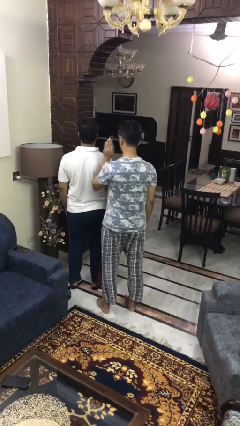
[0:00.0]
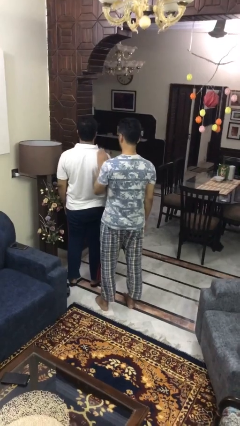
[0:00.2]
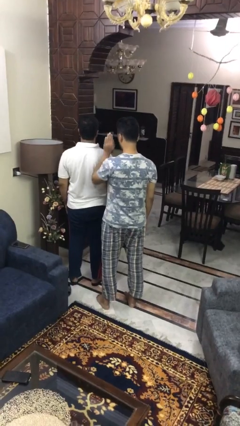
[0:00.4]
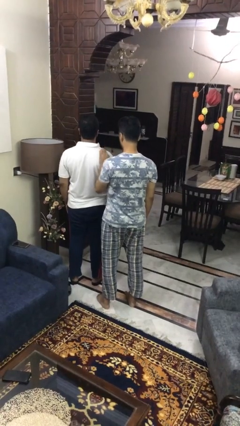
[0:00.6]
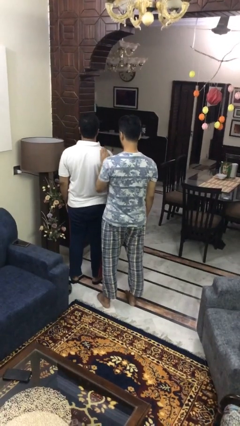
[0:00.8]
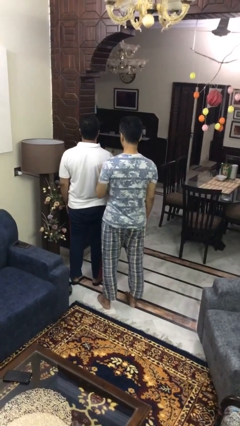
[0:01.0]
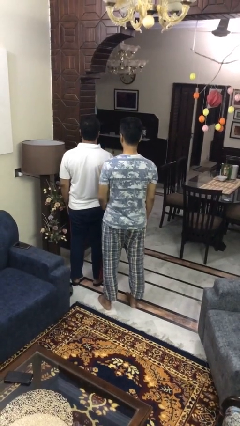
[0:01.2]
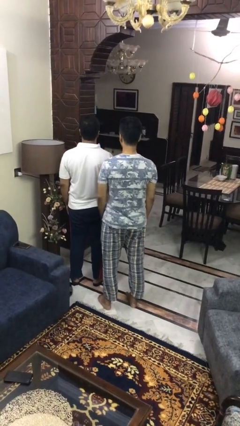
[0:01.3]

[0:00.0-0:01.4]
person pounds shoulders of person

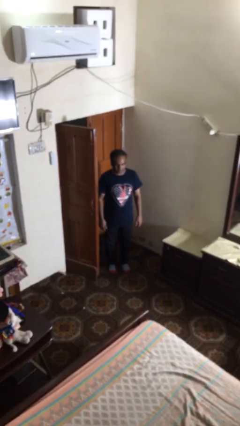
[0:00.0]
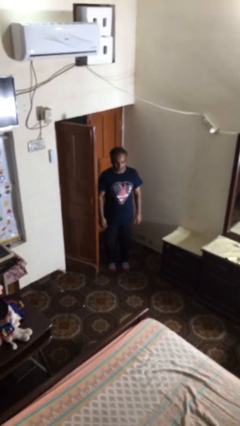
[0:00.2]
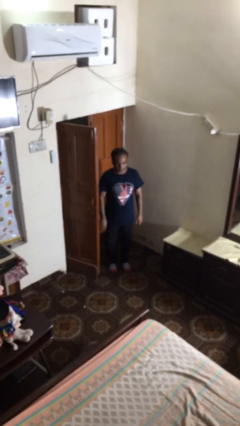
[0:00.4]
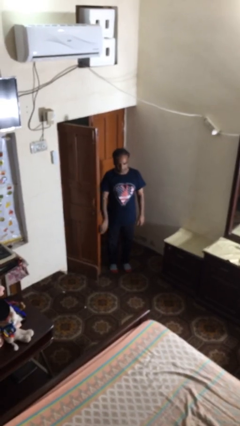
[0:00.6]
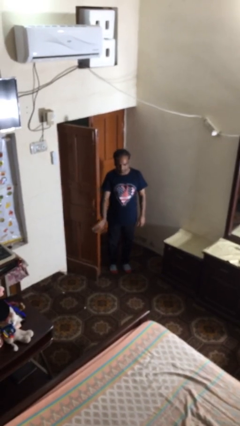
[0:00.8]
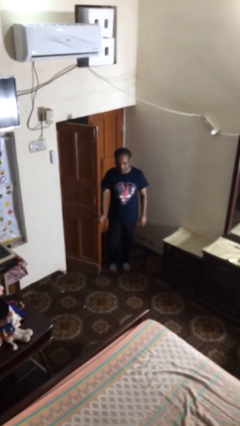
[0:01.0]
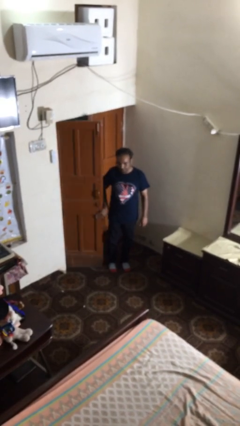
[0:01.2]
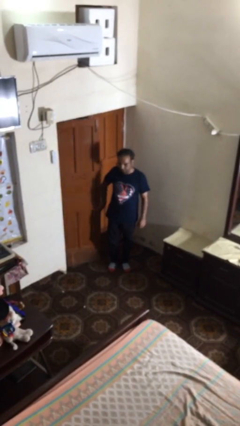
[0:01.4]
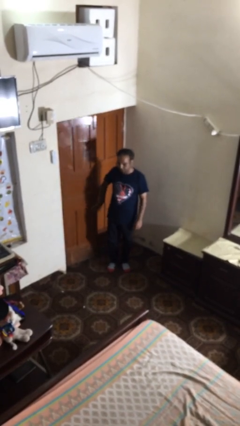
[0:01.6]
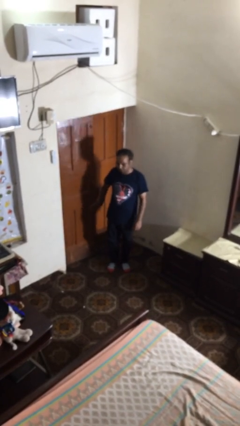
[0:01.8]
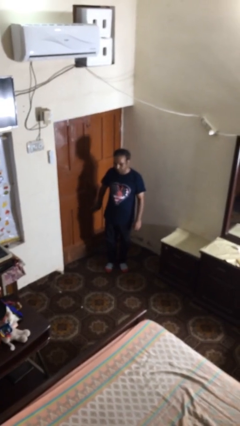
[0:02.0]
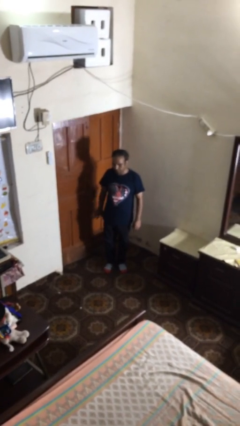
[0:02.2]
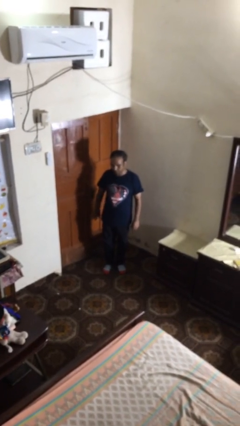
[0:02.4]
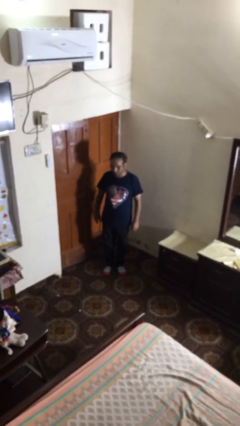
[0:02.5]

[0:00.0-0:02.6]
person closes facility door

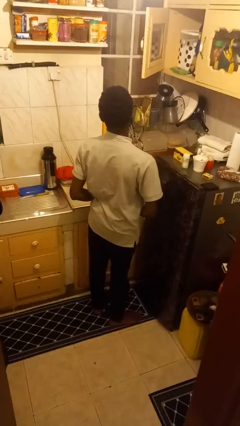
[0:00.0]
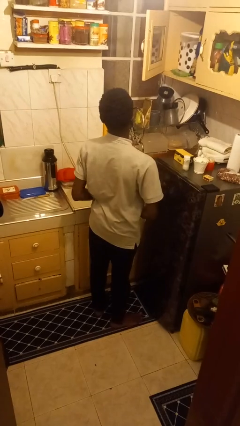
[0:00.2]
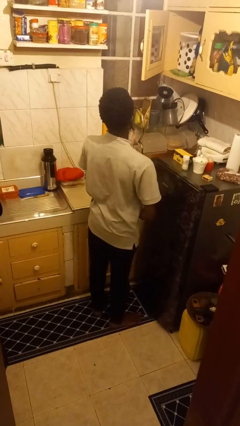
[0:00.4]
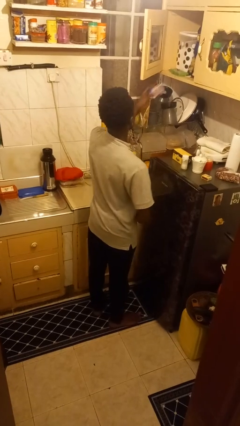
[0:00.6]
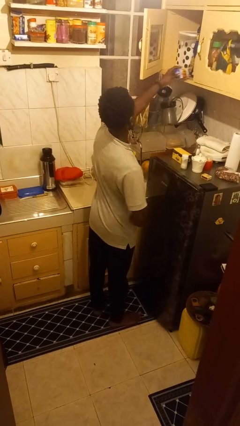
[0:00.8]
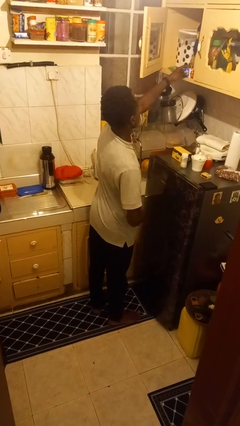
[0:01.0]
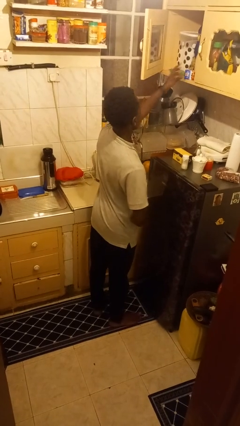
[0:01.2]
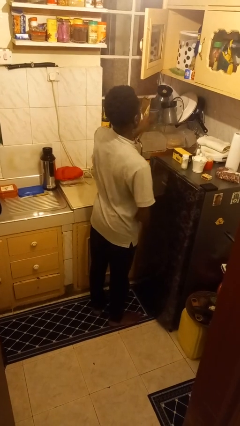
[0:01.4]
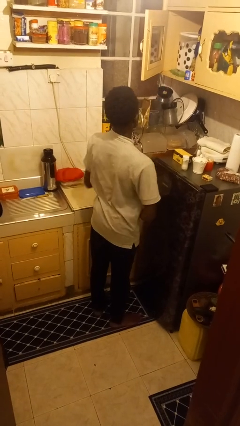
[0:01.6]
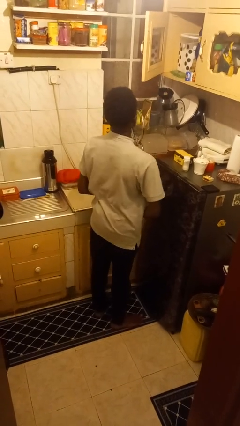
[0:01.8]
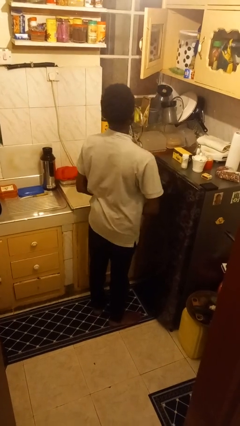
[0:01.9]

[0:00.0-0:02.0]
person puts down object into cabinet

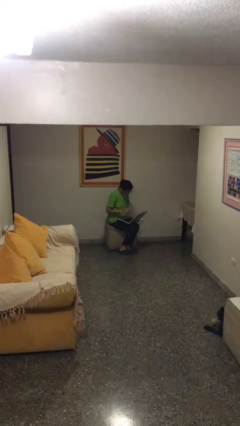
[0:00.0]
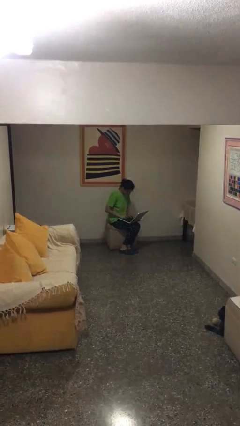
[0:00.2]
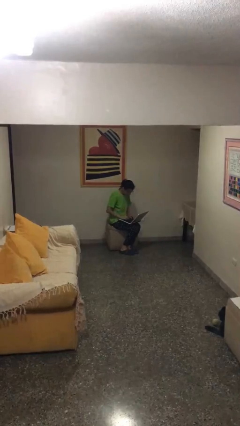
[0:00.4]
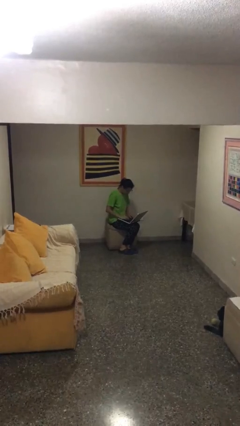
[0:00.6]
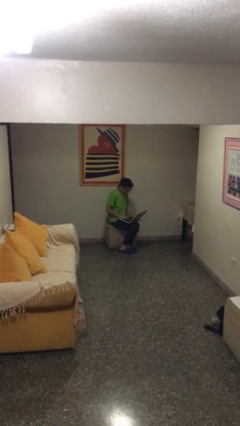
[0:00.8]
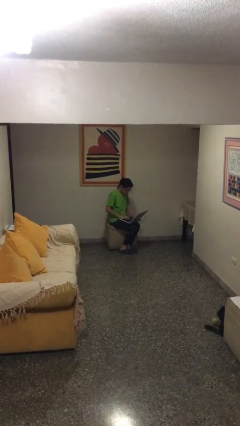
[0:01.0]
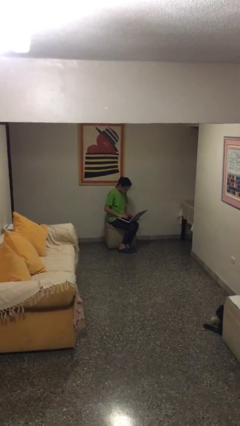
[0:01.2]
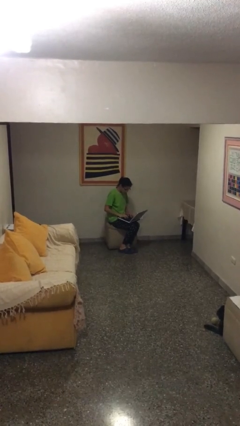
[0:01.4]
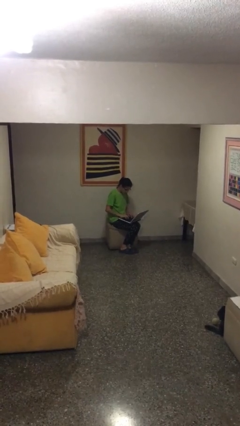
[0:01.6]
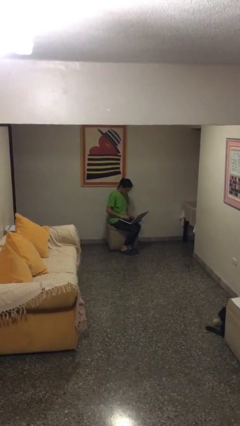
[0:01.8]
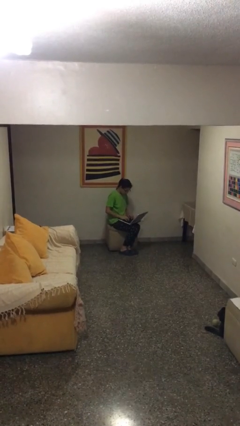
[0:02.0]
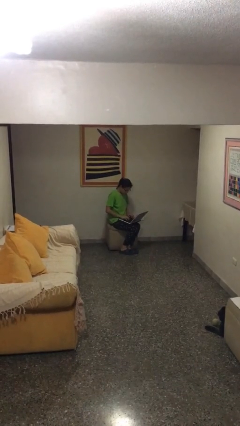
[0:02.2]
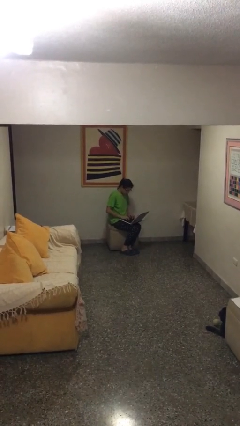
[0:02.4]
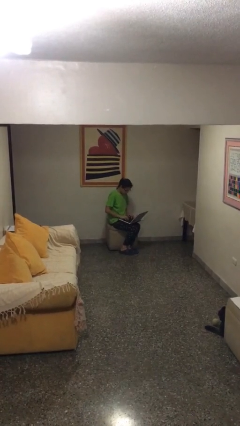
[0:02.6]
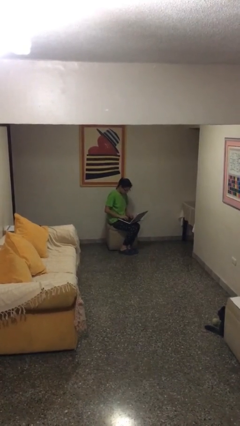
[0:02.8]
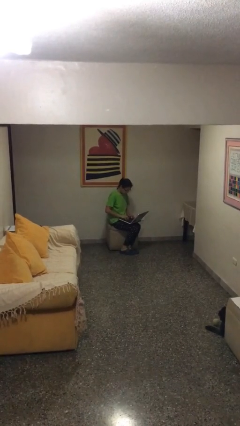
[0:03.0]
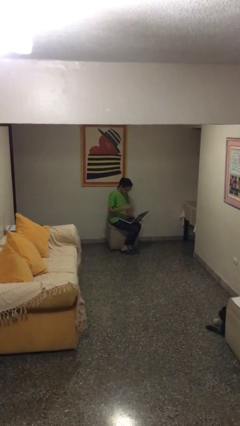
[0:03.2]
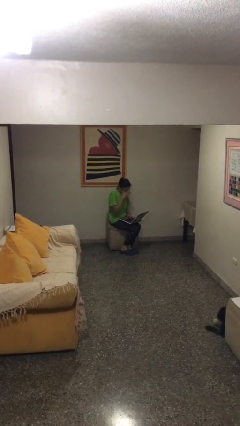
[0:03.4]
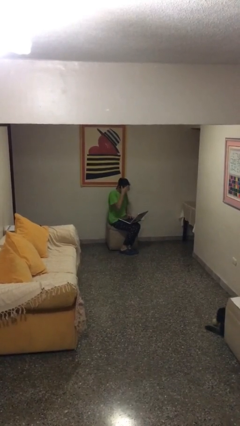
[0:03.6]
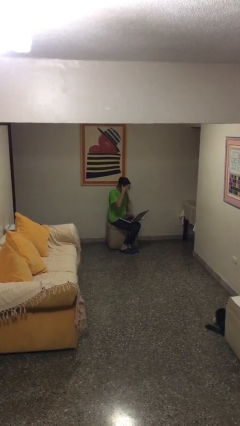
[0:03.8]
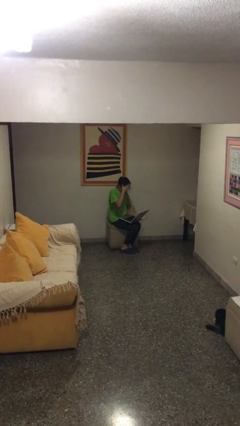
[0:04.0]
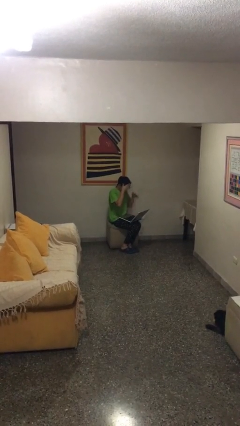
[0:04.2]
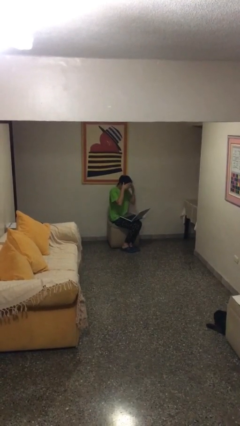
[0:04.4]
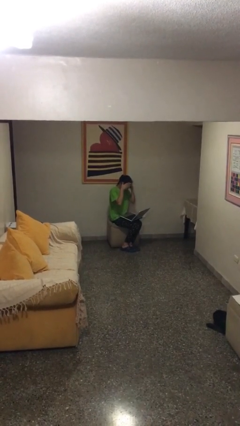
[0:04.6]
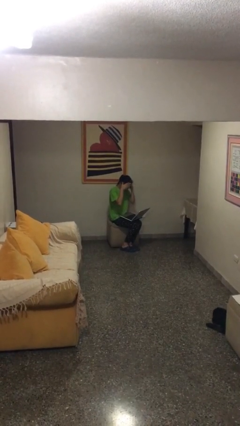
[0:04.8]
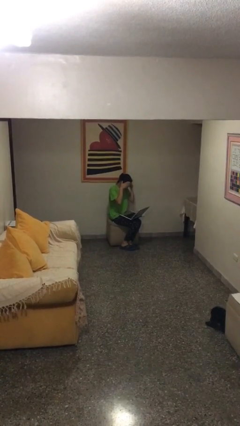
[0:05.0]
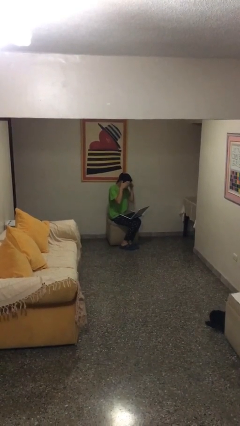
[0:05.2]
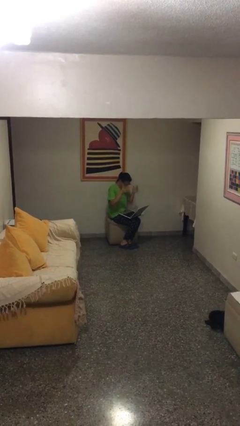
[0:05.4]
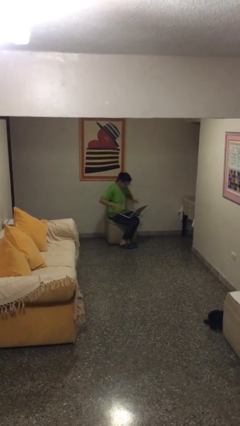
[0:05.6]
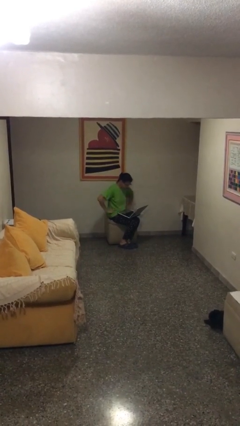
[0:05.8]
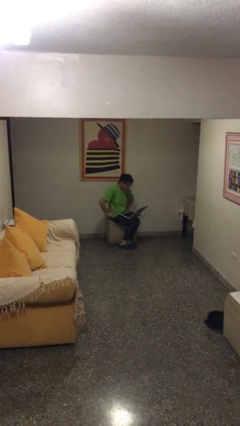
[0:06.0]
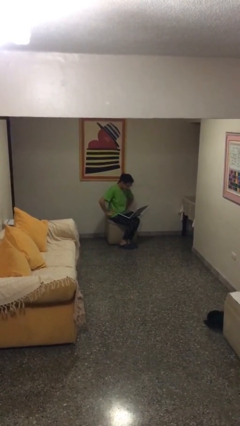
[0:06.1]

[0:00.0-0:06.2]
person interacts with laptop

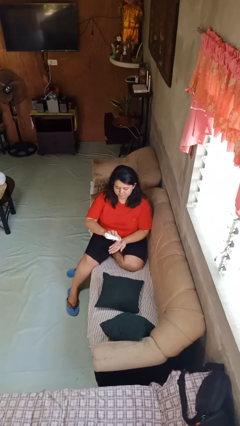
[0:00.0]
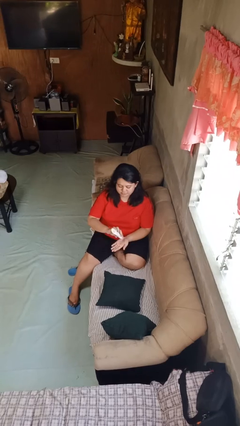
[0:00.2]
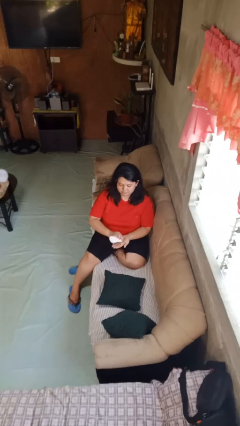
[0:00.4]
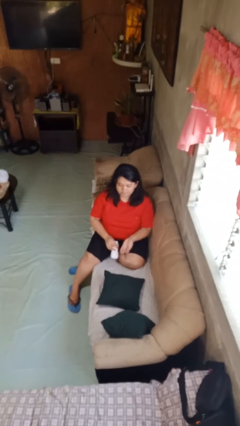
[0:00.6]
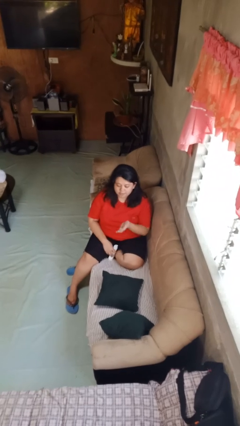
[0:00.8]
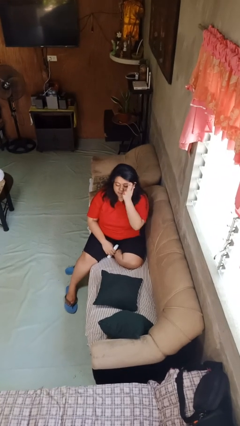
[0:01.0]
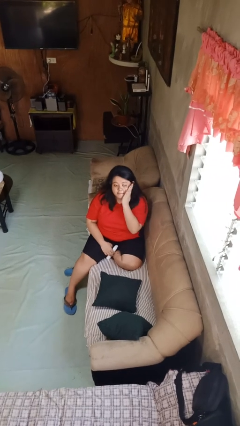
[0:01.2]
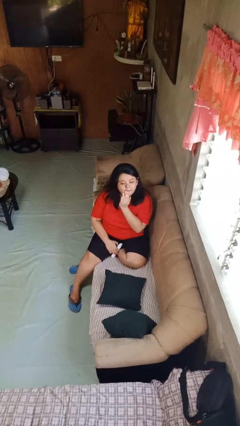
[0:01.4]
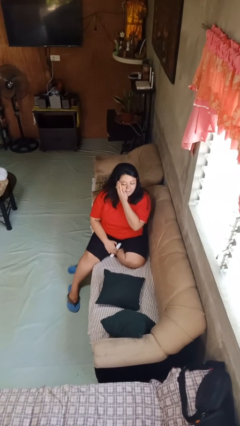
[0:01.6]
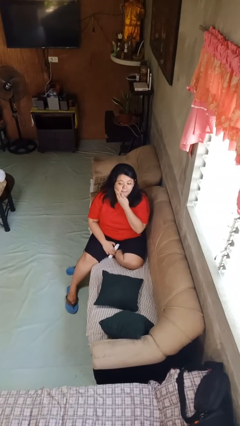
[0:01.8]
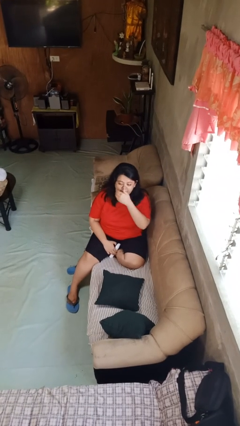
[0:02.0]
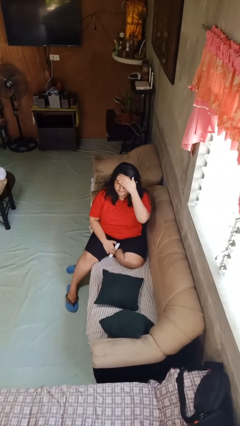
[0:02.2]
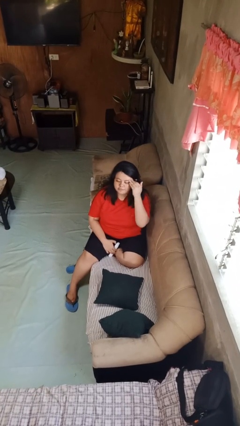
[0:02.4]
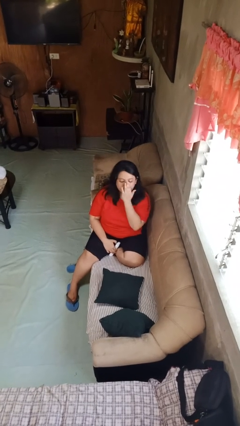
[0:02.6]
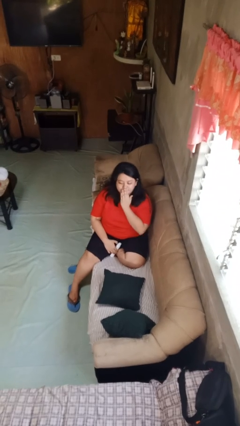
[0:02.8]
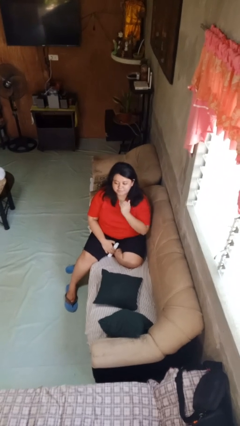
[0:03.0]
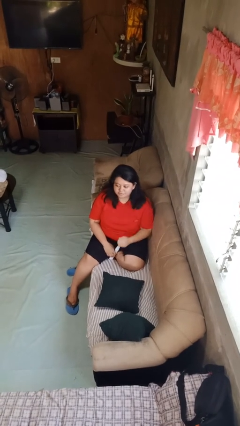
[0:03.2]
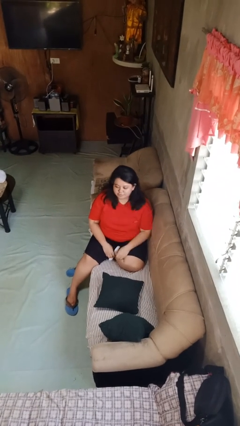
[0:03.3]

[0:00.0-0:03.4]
person applies facial moisturizer

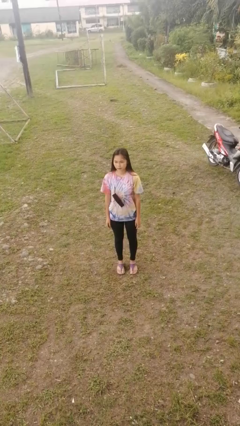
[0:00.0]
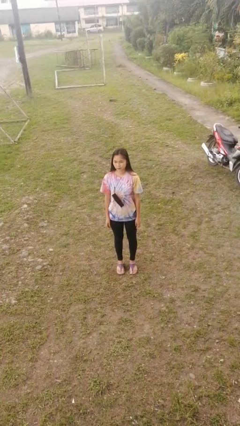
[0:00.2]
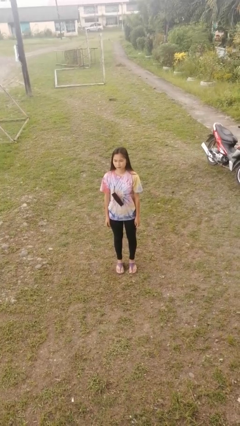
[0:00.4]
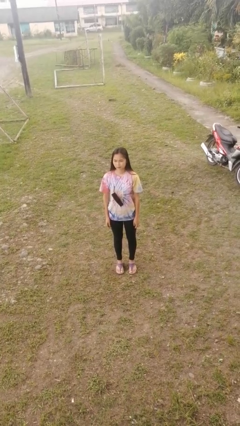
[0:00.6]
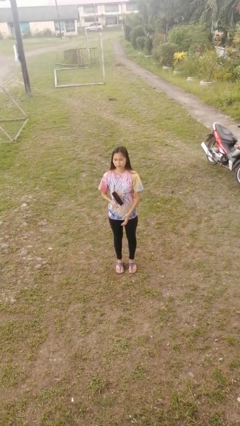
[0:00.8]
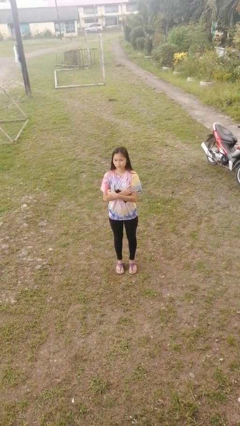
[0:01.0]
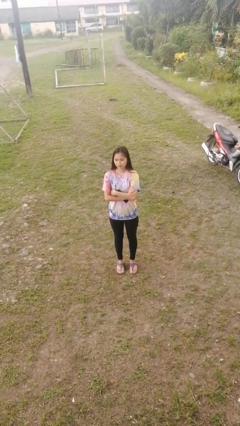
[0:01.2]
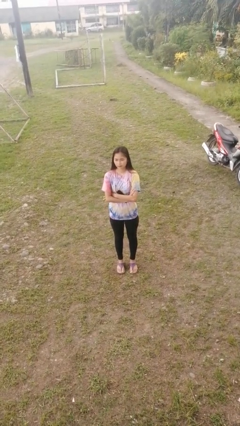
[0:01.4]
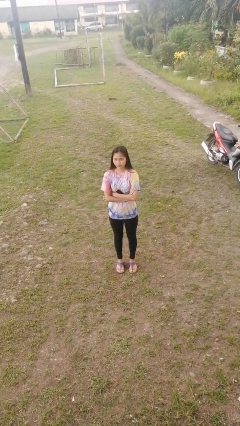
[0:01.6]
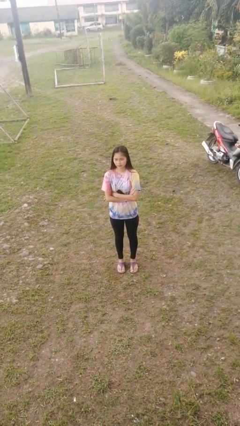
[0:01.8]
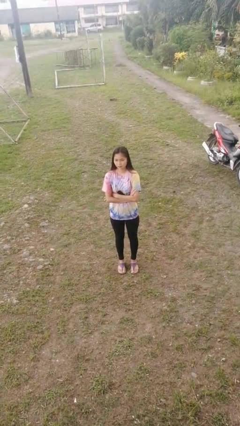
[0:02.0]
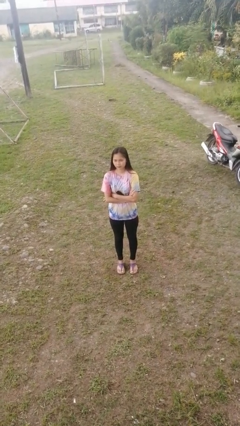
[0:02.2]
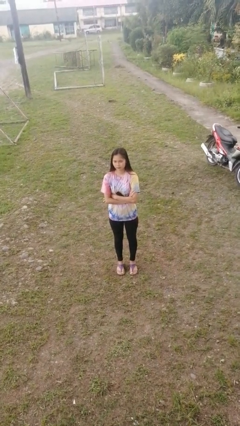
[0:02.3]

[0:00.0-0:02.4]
person crosses arms
